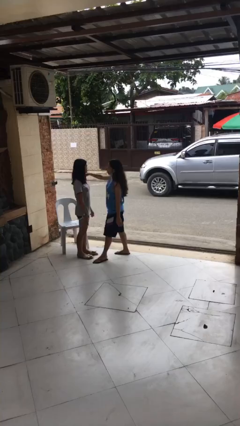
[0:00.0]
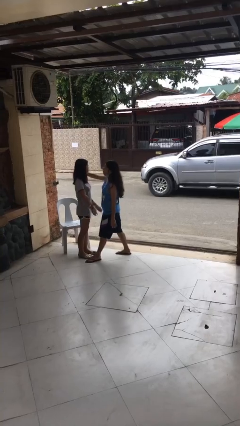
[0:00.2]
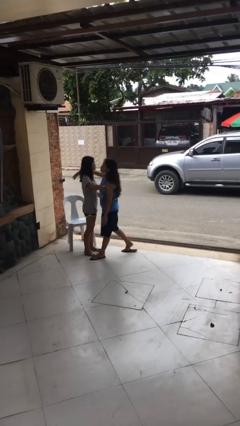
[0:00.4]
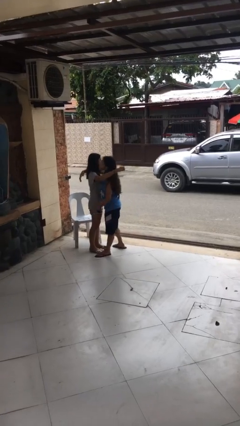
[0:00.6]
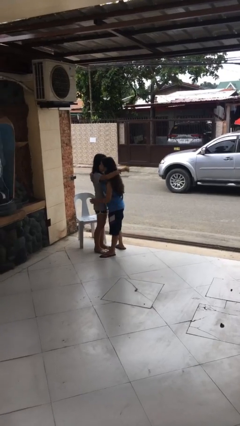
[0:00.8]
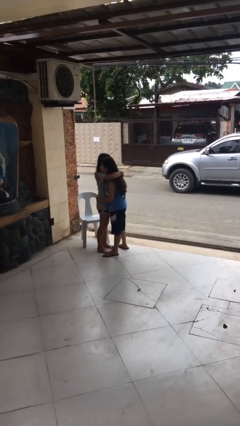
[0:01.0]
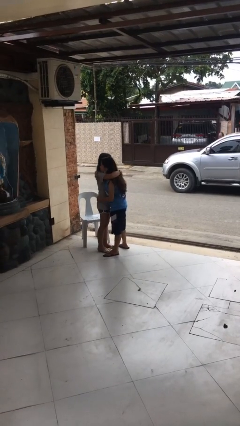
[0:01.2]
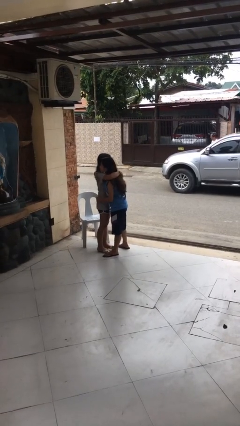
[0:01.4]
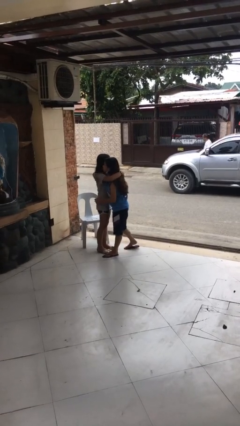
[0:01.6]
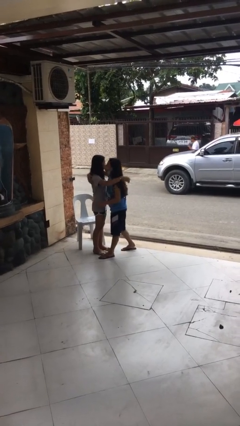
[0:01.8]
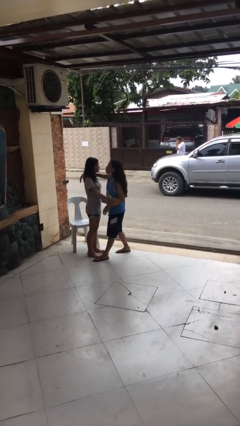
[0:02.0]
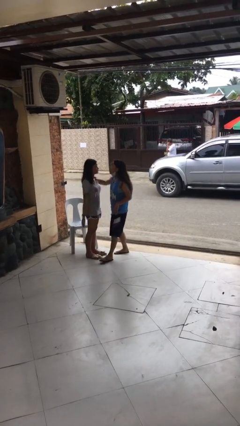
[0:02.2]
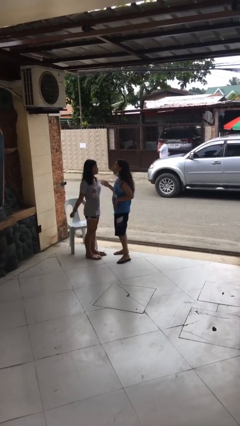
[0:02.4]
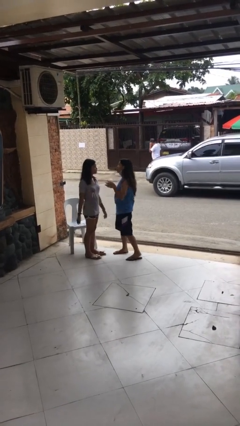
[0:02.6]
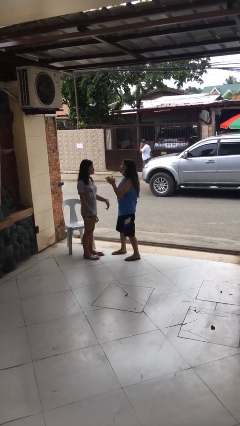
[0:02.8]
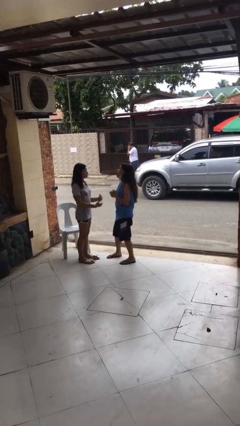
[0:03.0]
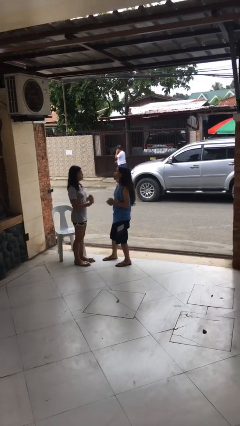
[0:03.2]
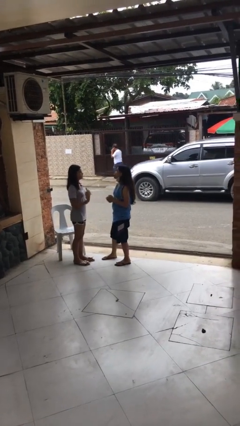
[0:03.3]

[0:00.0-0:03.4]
person embraces person

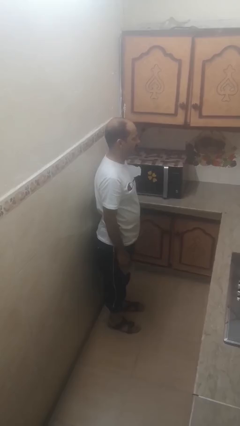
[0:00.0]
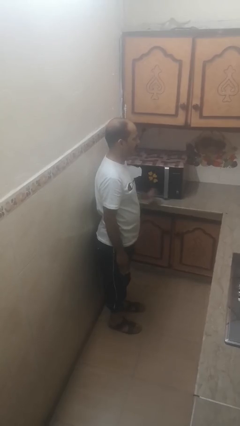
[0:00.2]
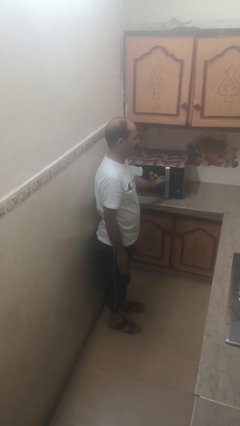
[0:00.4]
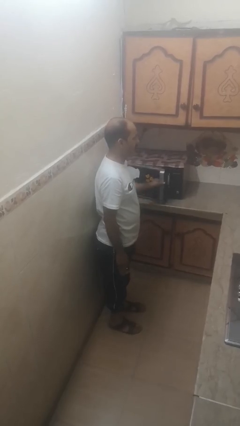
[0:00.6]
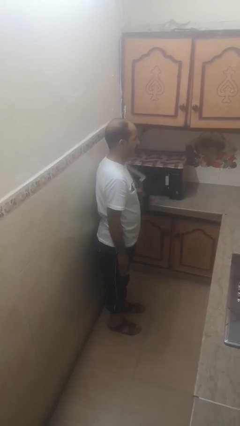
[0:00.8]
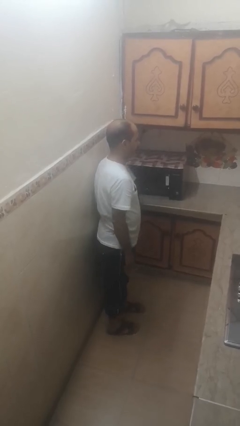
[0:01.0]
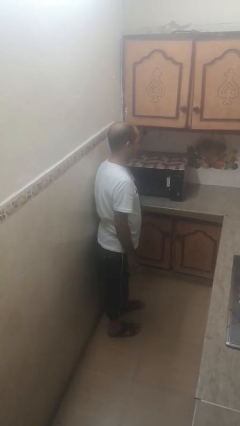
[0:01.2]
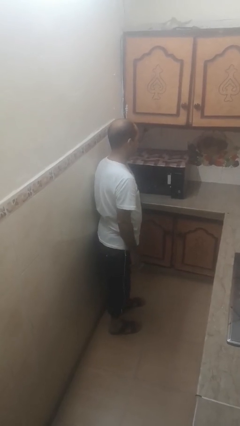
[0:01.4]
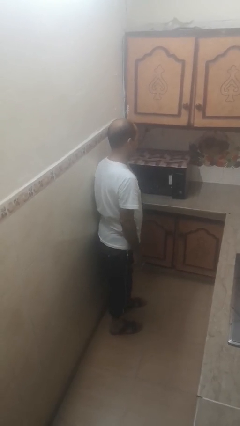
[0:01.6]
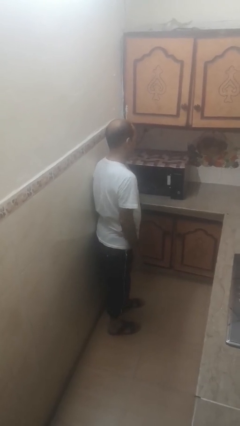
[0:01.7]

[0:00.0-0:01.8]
person opens microwave

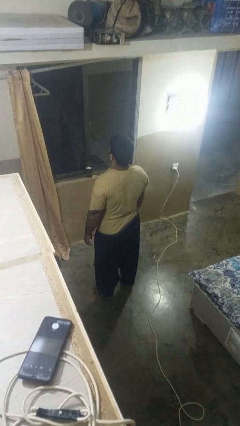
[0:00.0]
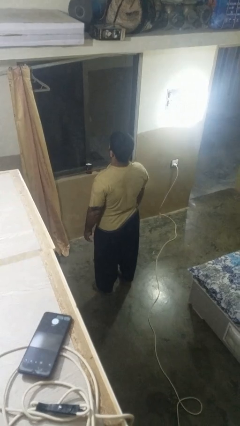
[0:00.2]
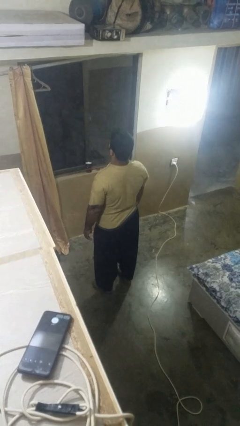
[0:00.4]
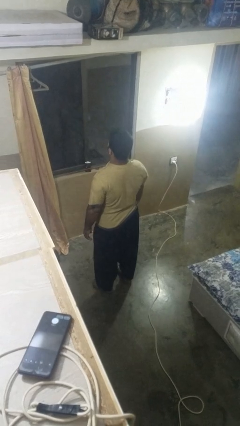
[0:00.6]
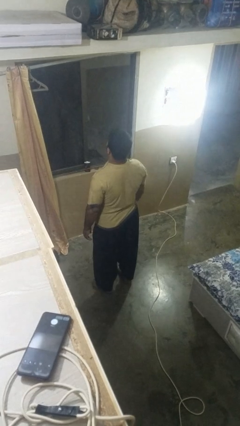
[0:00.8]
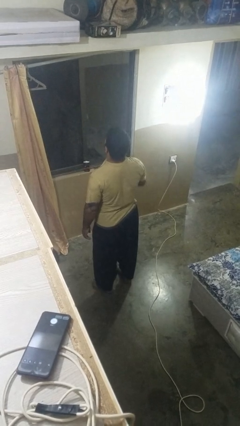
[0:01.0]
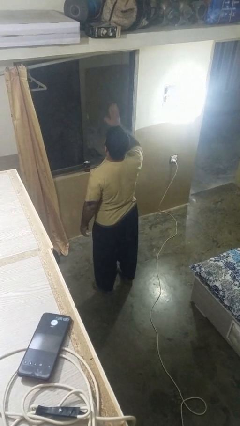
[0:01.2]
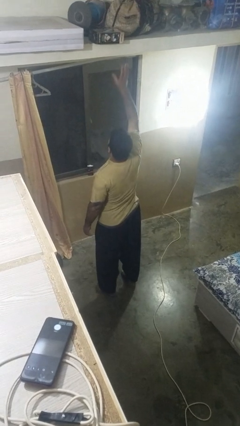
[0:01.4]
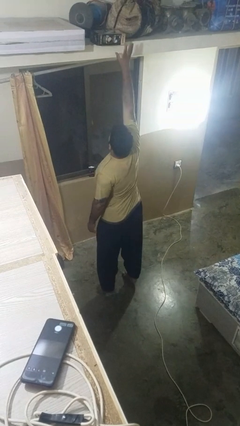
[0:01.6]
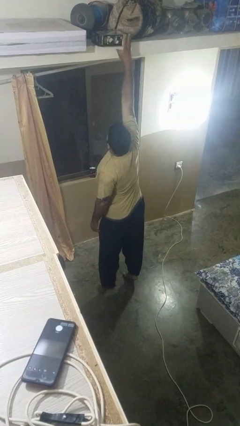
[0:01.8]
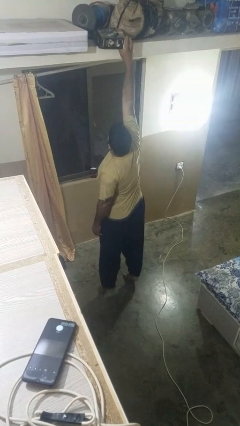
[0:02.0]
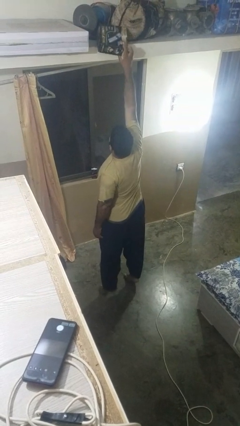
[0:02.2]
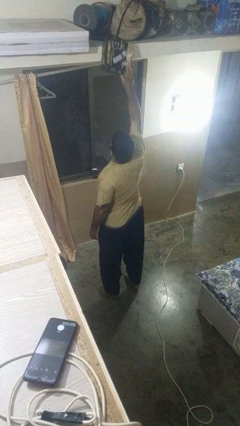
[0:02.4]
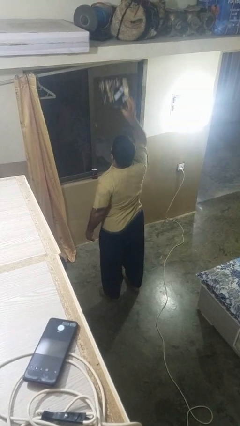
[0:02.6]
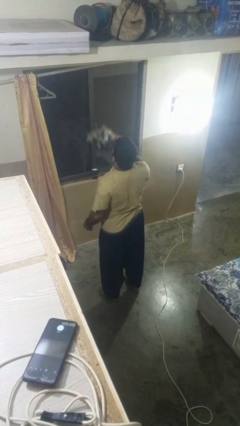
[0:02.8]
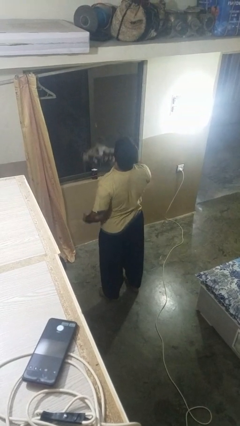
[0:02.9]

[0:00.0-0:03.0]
person picks up object from shelf

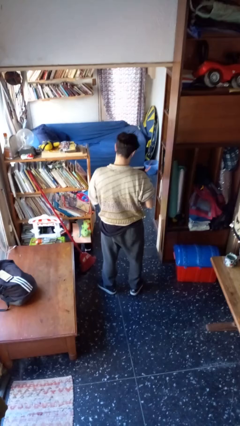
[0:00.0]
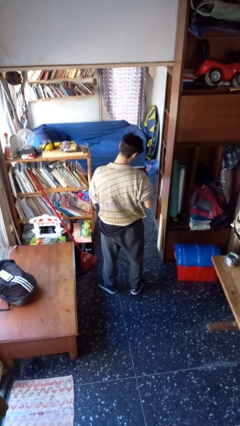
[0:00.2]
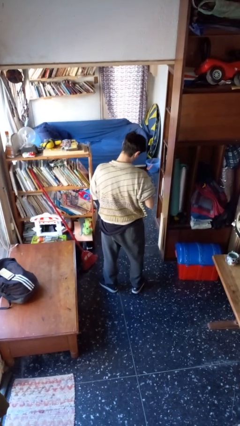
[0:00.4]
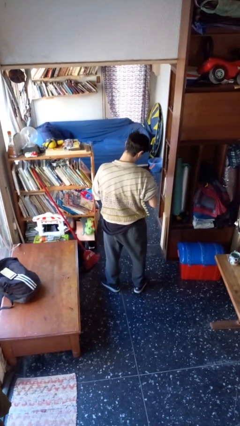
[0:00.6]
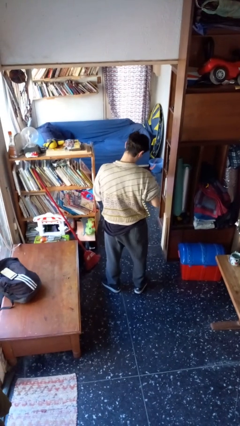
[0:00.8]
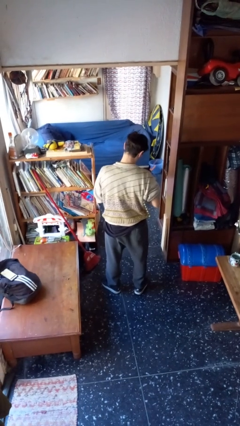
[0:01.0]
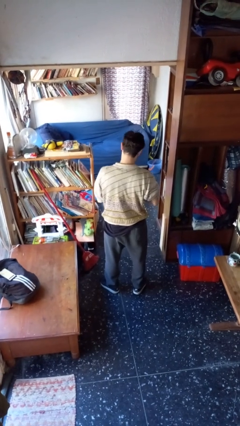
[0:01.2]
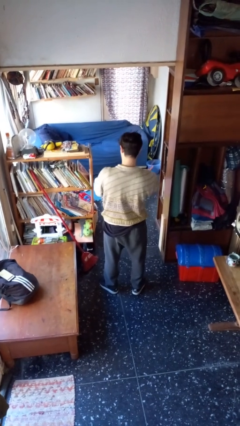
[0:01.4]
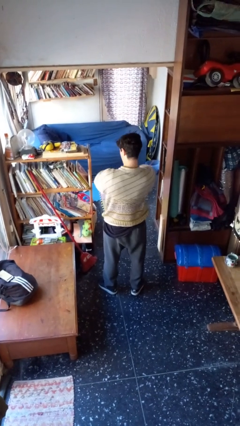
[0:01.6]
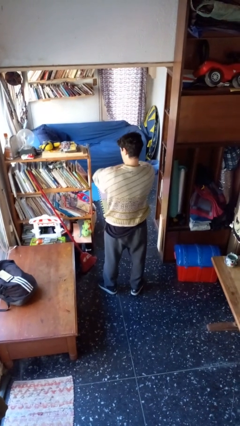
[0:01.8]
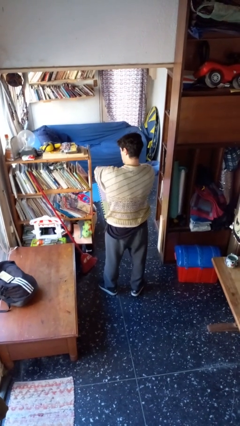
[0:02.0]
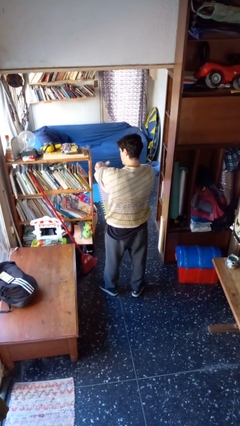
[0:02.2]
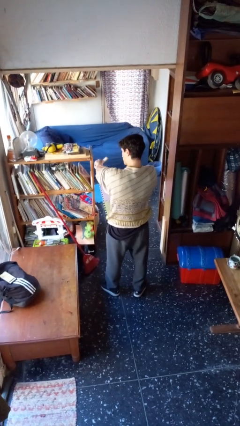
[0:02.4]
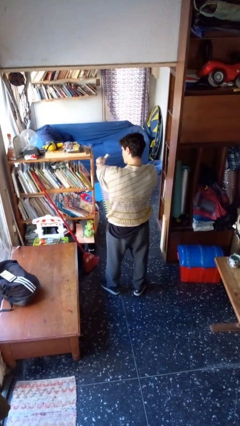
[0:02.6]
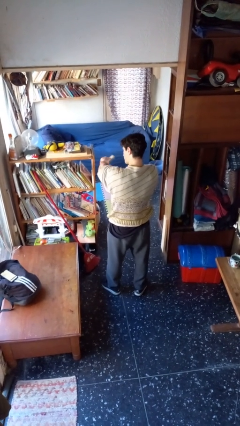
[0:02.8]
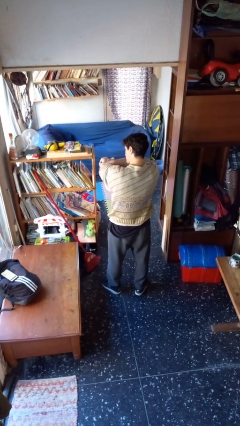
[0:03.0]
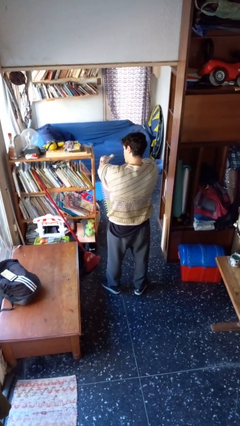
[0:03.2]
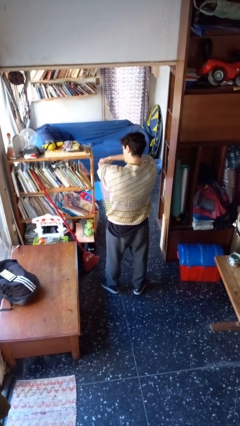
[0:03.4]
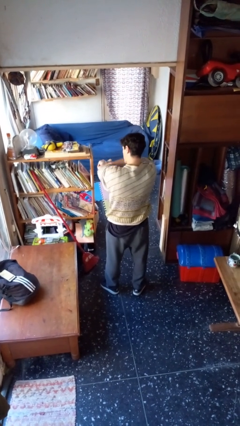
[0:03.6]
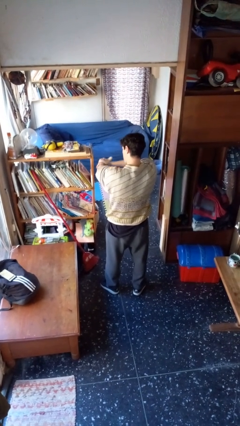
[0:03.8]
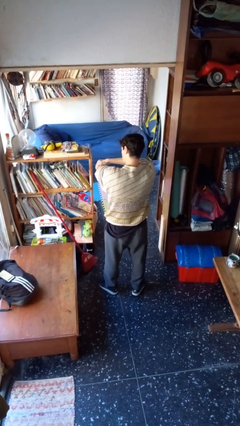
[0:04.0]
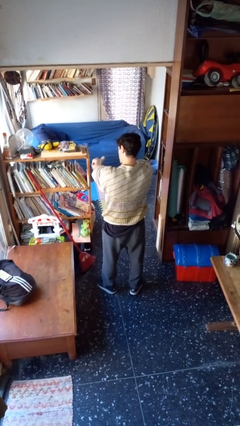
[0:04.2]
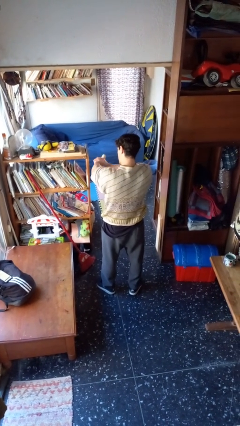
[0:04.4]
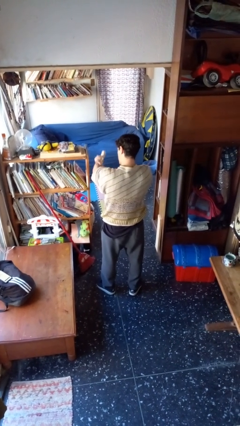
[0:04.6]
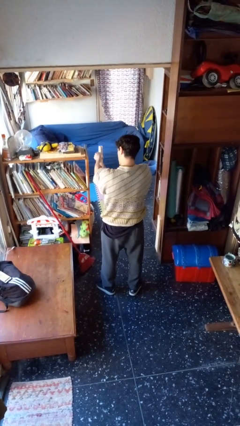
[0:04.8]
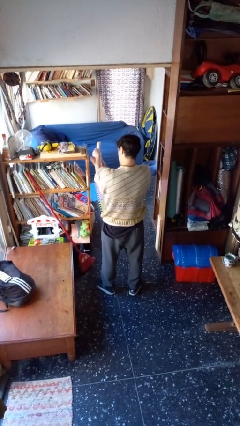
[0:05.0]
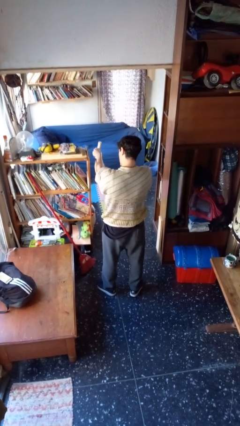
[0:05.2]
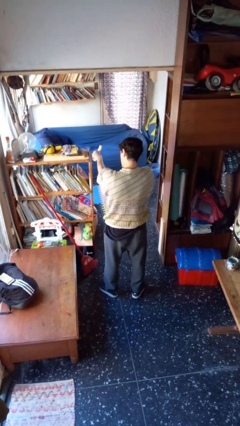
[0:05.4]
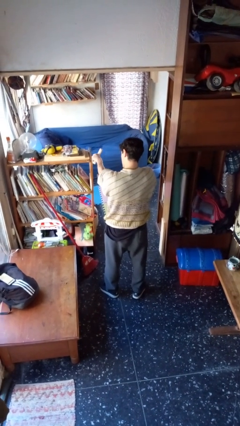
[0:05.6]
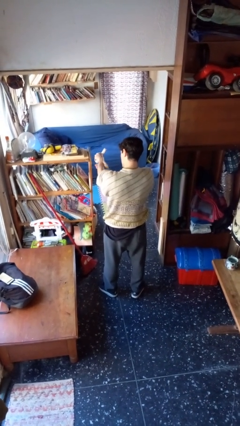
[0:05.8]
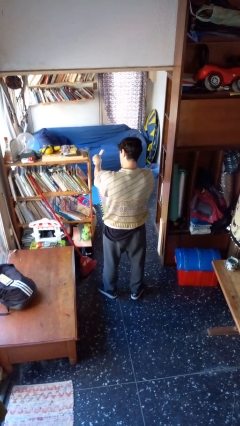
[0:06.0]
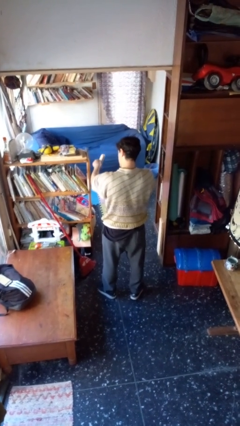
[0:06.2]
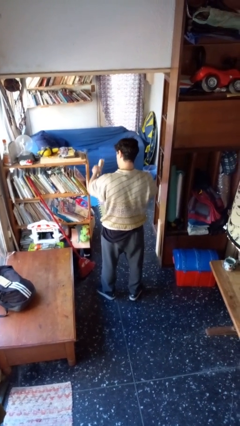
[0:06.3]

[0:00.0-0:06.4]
person applies sunscreen

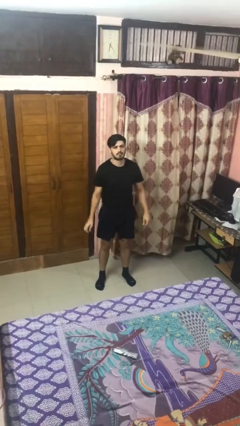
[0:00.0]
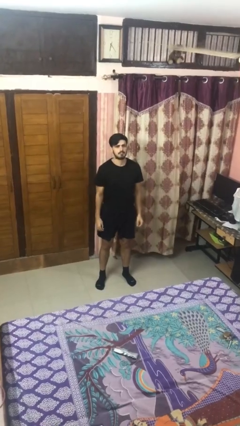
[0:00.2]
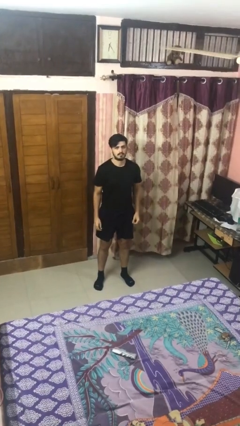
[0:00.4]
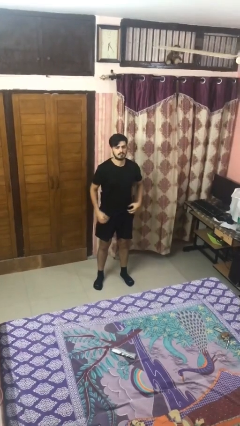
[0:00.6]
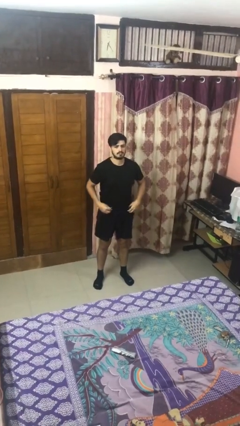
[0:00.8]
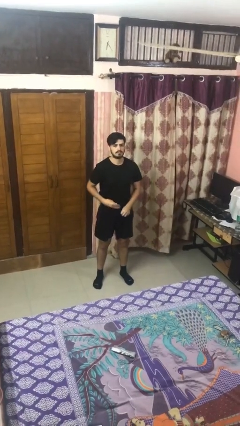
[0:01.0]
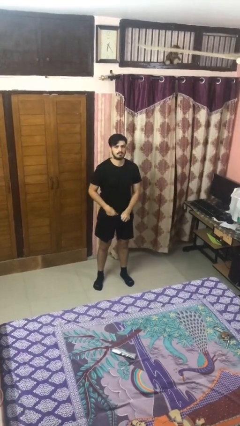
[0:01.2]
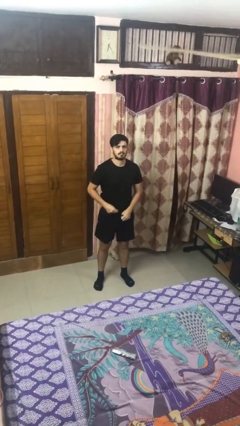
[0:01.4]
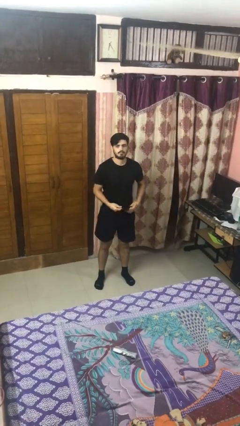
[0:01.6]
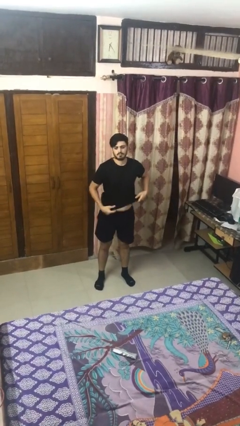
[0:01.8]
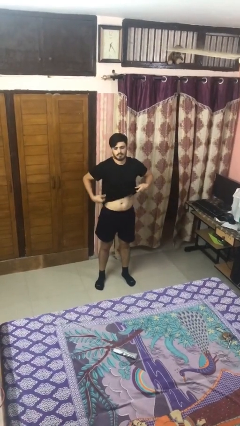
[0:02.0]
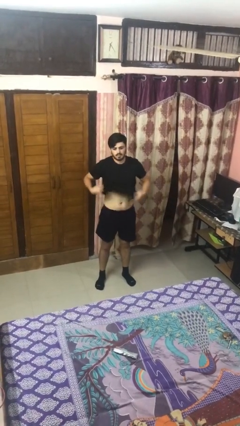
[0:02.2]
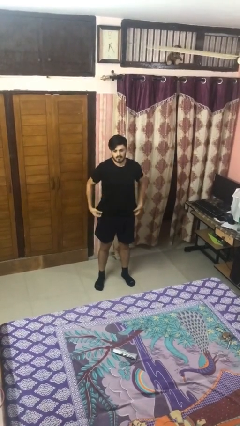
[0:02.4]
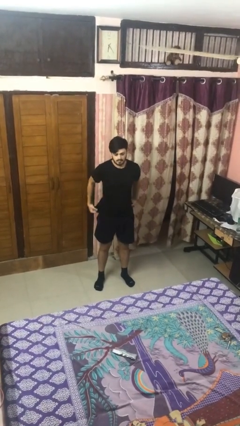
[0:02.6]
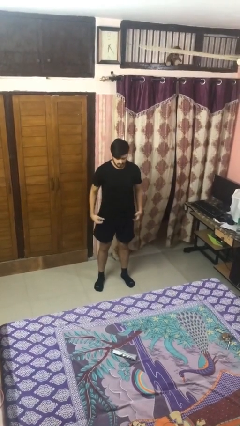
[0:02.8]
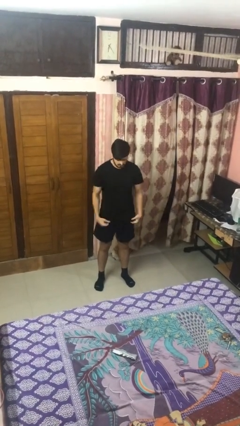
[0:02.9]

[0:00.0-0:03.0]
person untucks shirt
